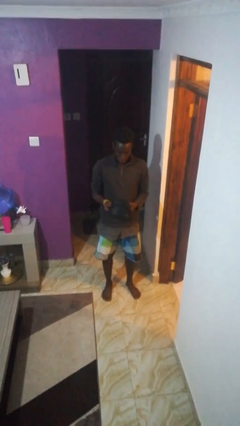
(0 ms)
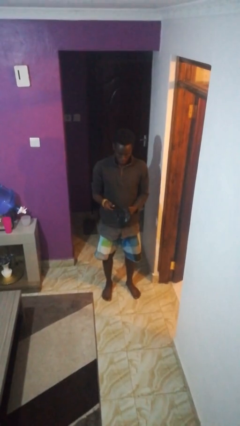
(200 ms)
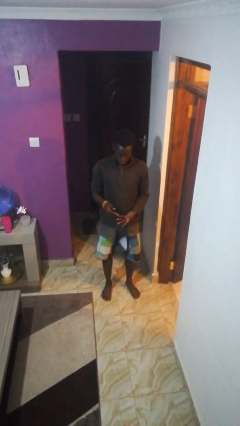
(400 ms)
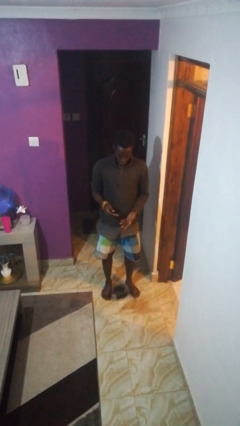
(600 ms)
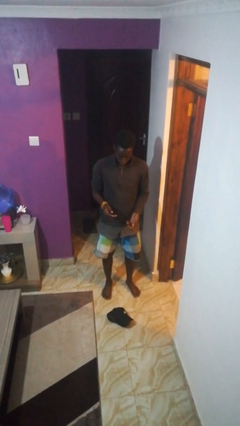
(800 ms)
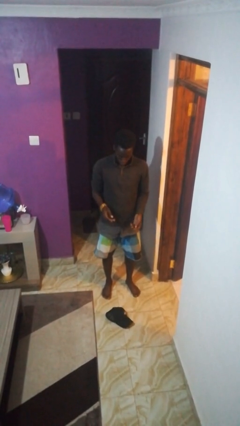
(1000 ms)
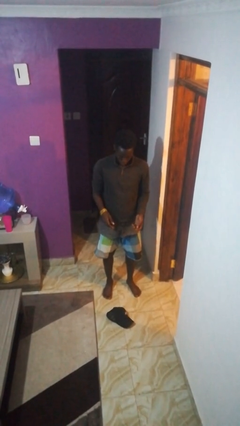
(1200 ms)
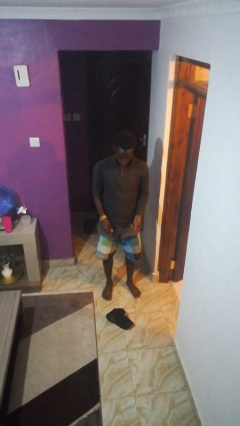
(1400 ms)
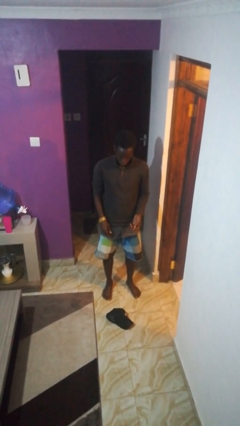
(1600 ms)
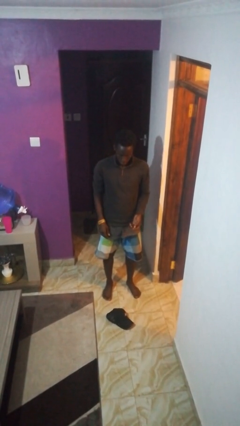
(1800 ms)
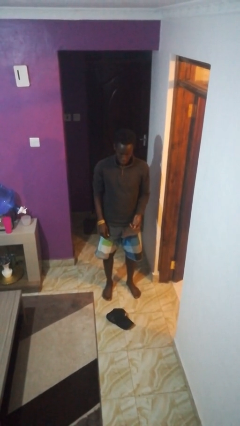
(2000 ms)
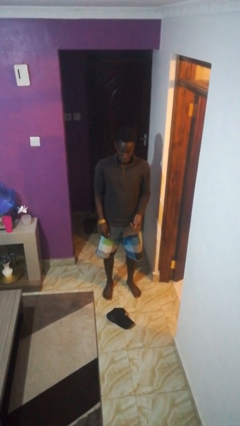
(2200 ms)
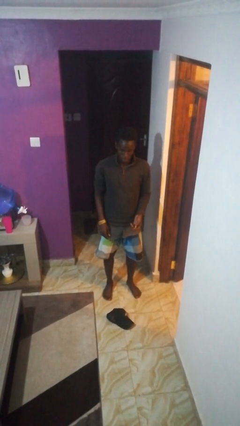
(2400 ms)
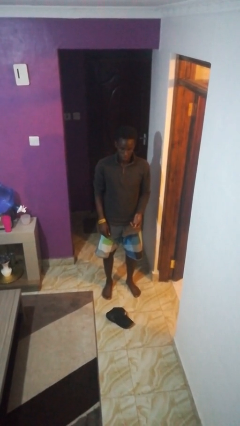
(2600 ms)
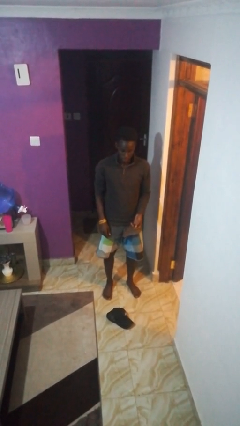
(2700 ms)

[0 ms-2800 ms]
person drops object

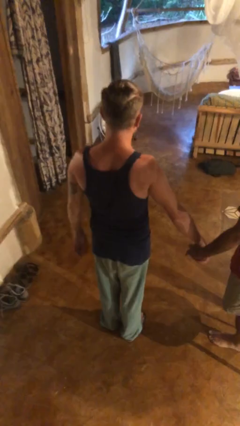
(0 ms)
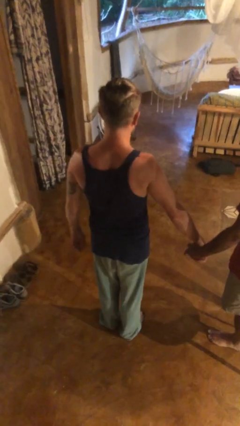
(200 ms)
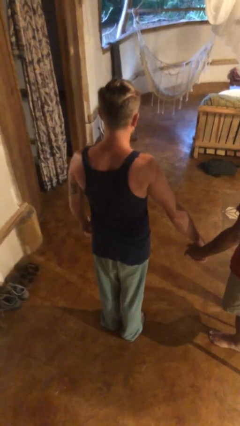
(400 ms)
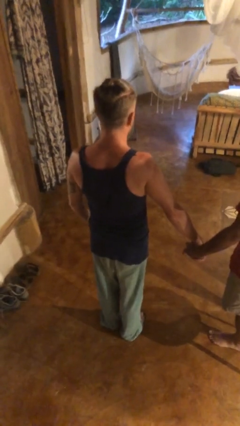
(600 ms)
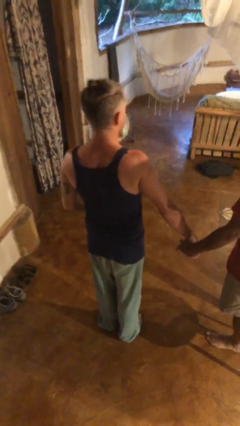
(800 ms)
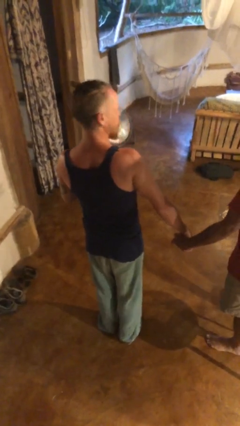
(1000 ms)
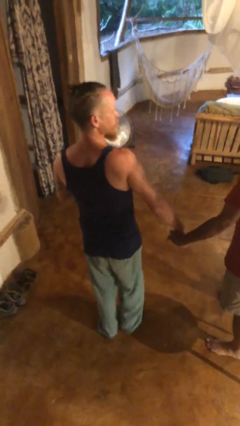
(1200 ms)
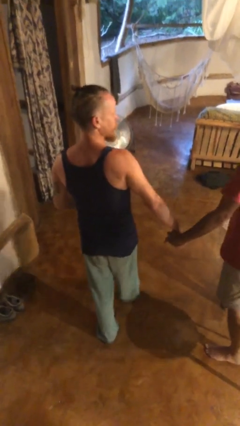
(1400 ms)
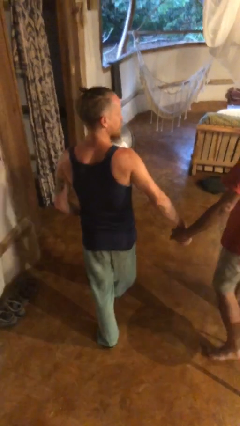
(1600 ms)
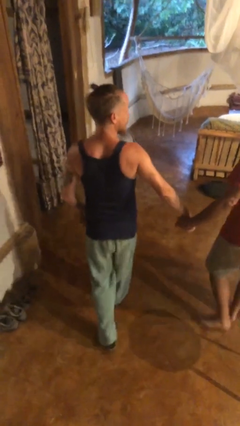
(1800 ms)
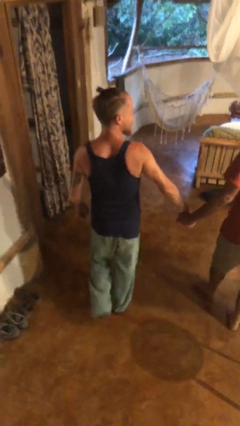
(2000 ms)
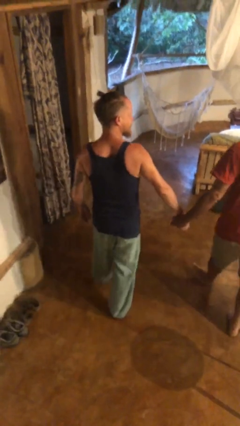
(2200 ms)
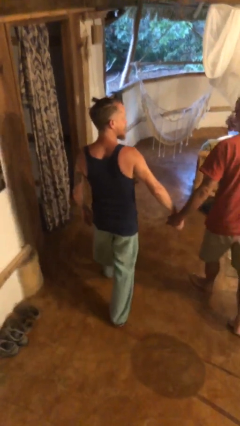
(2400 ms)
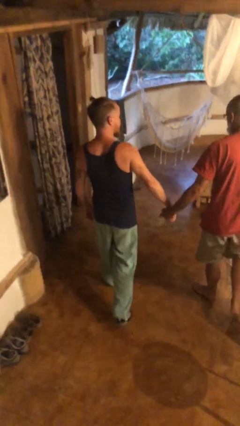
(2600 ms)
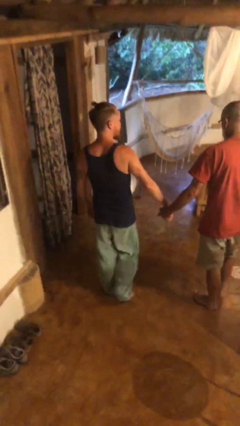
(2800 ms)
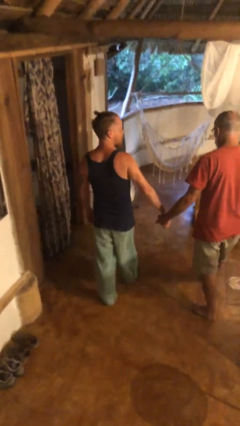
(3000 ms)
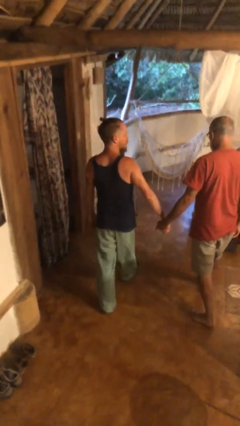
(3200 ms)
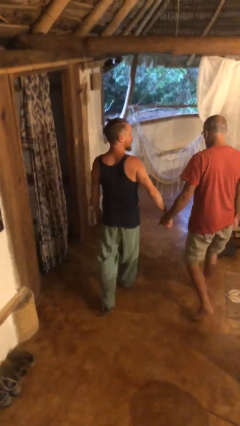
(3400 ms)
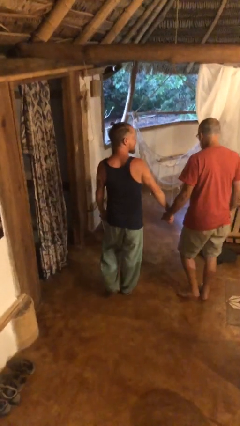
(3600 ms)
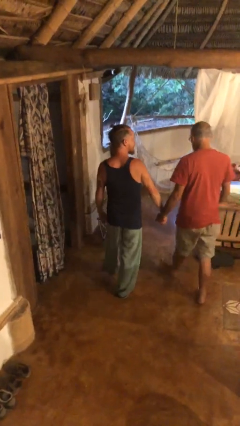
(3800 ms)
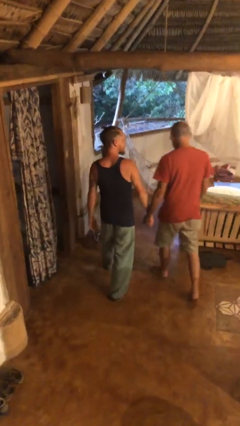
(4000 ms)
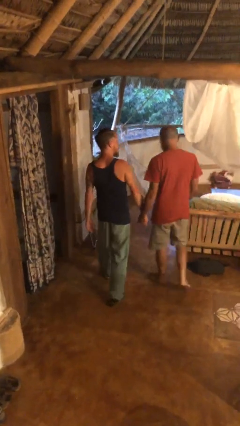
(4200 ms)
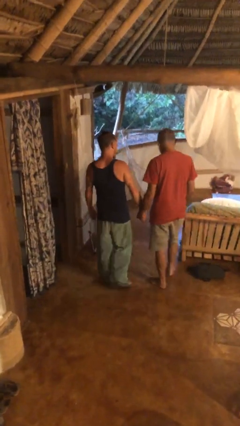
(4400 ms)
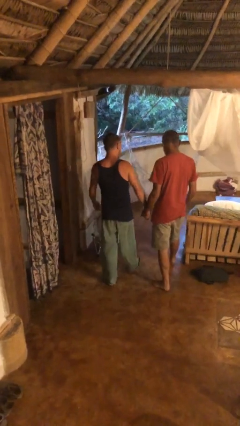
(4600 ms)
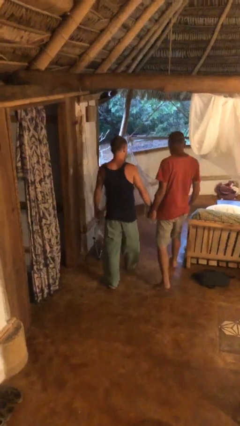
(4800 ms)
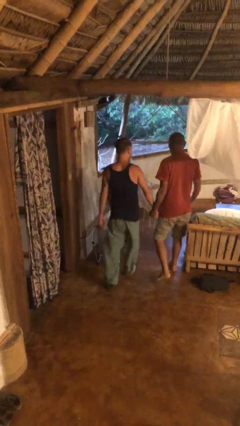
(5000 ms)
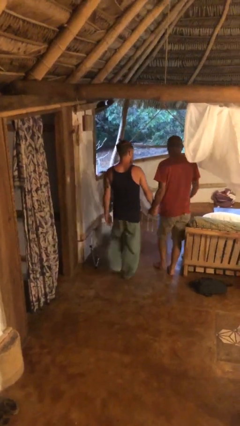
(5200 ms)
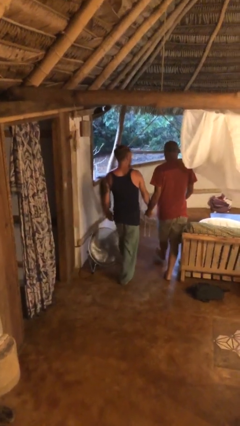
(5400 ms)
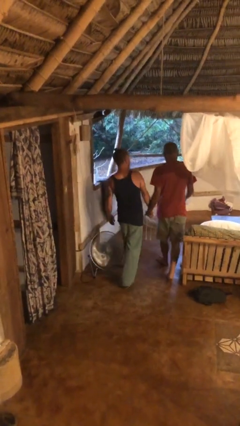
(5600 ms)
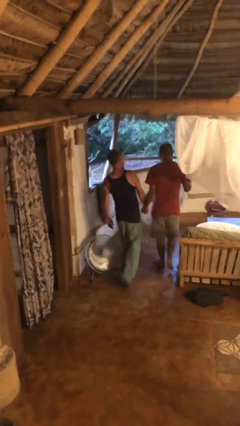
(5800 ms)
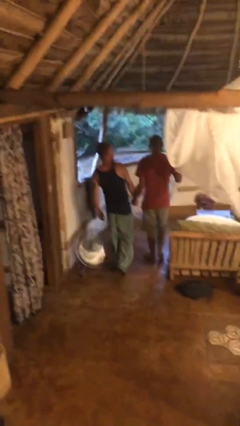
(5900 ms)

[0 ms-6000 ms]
person holds hand

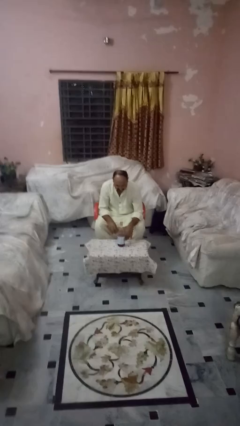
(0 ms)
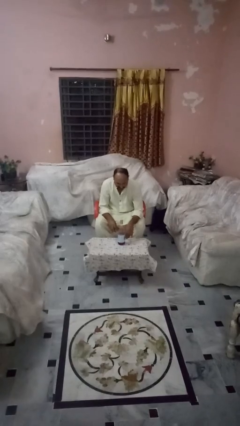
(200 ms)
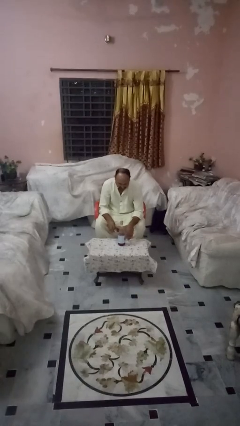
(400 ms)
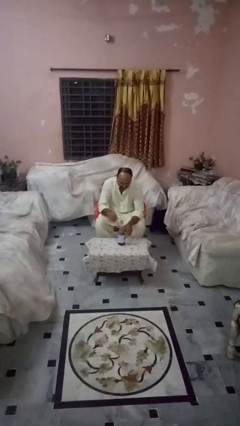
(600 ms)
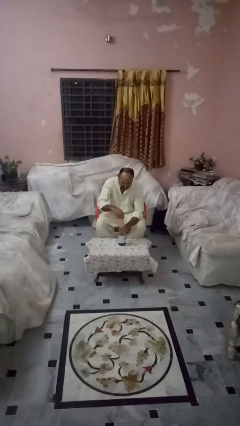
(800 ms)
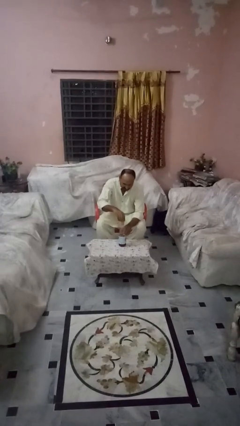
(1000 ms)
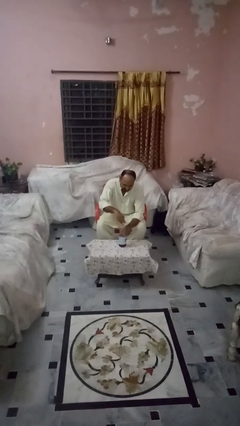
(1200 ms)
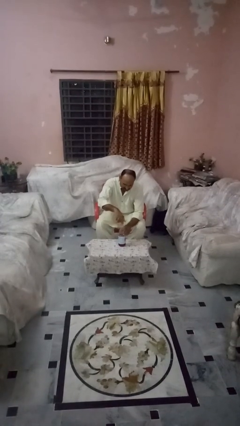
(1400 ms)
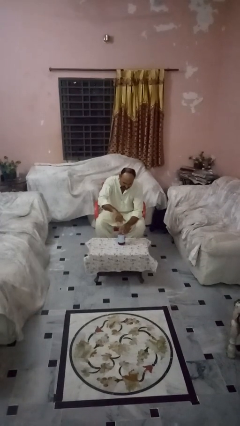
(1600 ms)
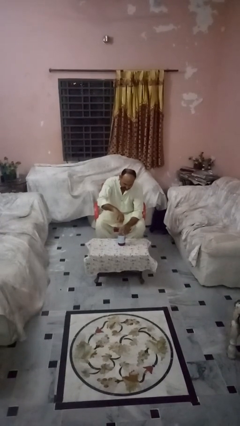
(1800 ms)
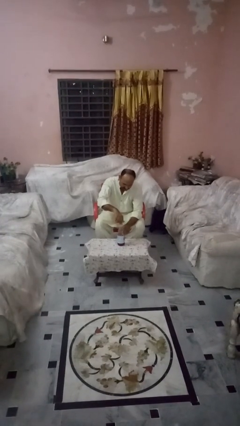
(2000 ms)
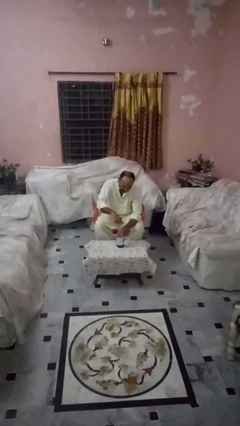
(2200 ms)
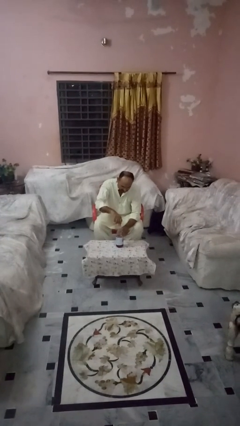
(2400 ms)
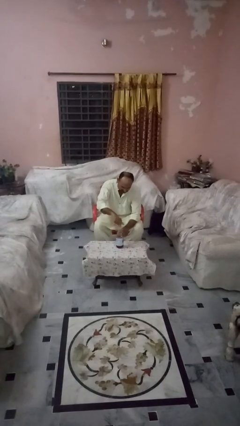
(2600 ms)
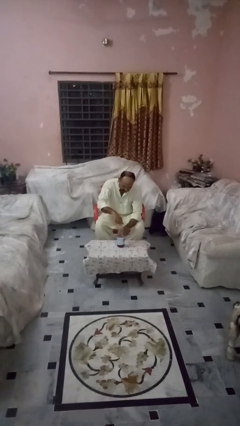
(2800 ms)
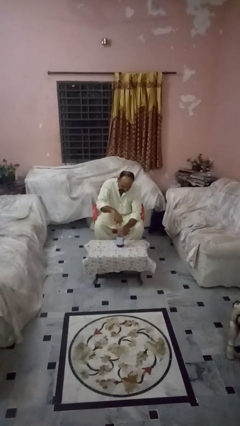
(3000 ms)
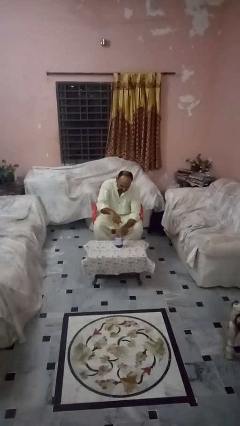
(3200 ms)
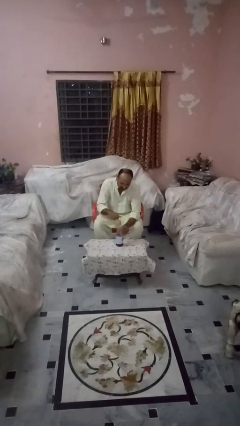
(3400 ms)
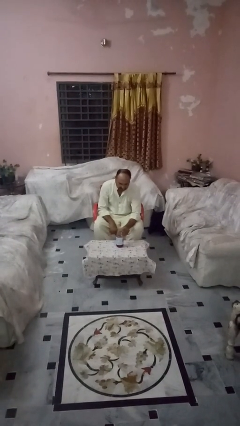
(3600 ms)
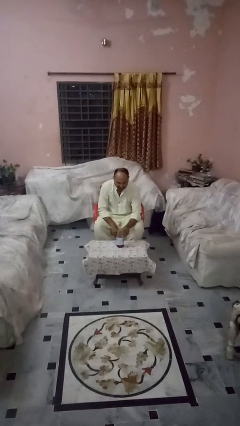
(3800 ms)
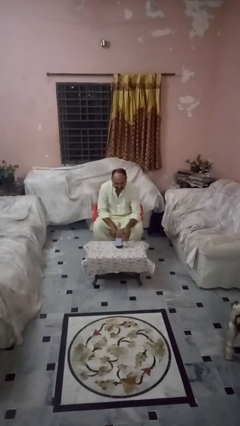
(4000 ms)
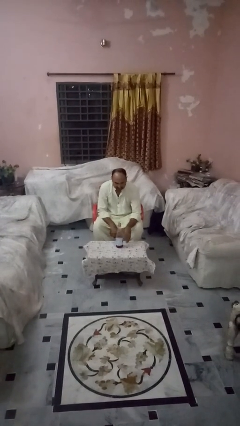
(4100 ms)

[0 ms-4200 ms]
person screws lid to bottle

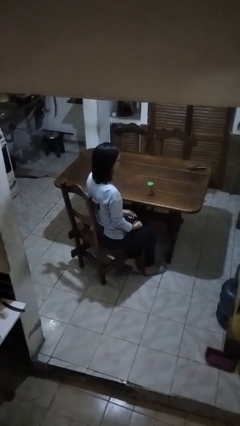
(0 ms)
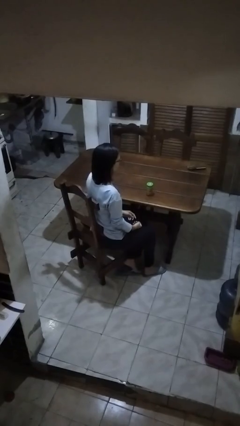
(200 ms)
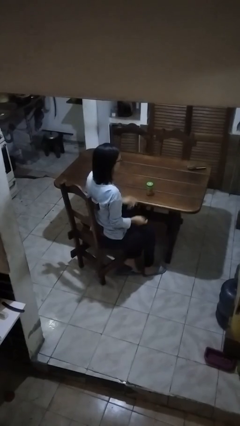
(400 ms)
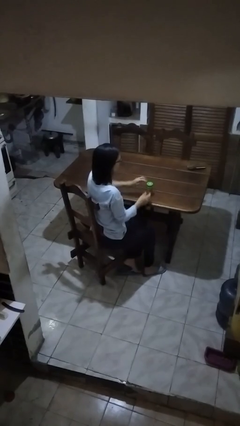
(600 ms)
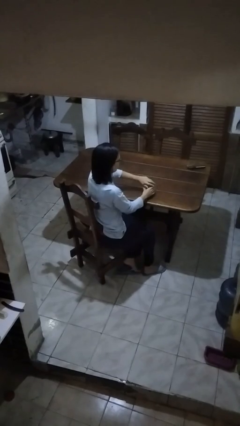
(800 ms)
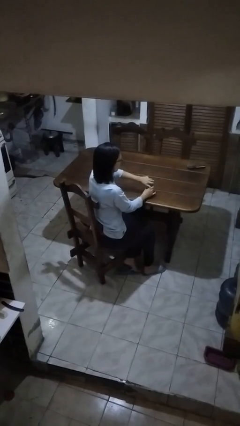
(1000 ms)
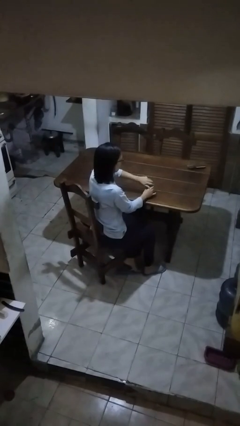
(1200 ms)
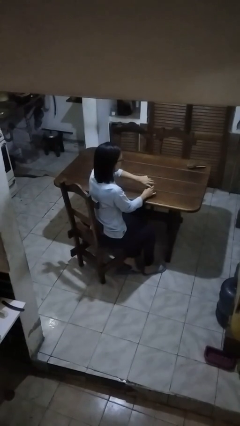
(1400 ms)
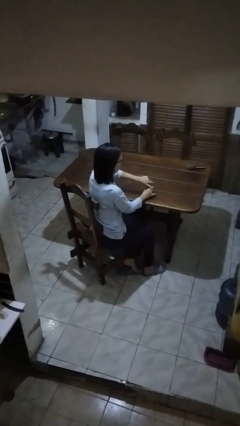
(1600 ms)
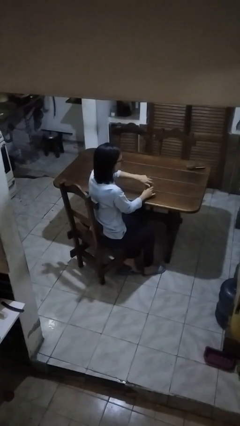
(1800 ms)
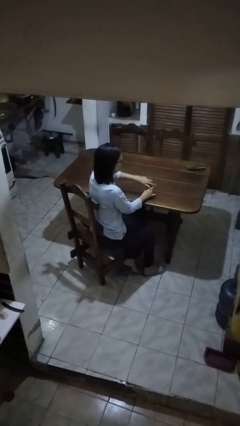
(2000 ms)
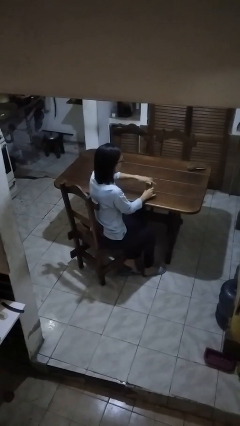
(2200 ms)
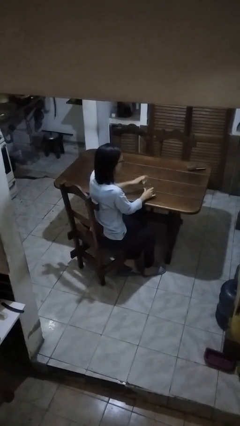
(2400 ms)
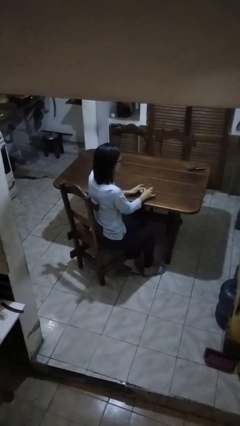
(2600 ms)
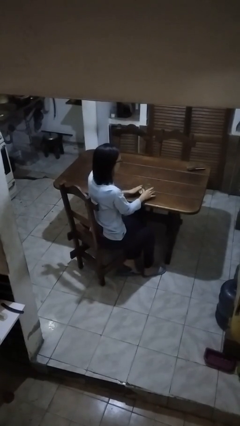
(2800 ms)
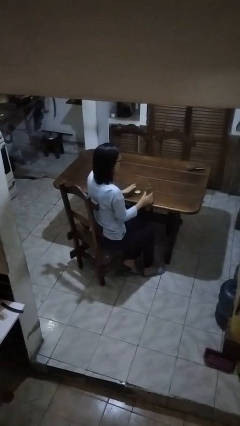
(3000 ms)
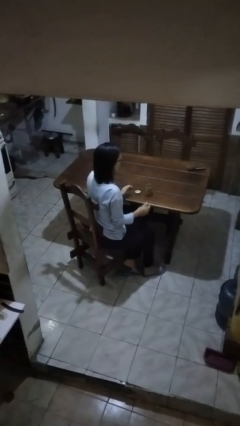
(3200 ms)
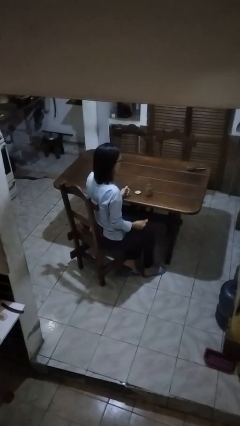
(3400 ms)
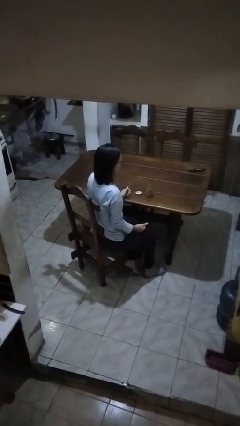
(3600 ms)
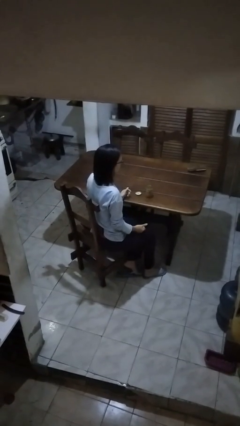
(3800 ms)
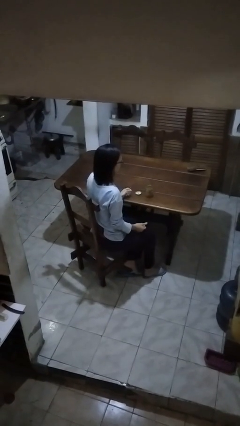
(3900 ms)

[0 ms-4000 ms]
person opens jar

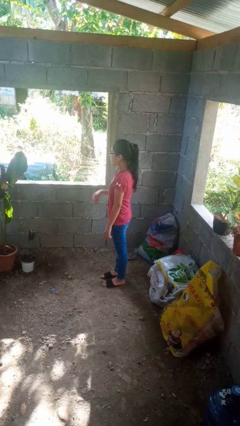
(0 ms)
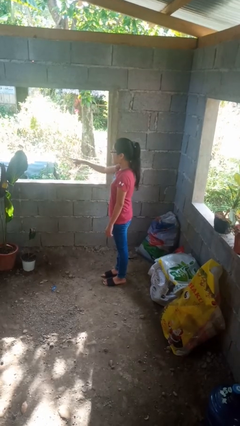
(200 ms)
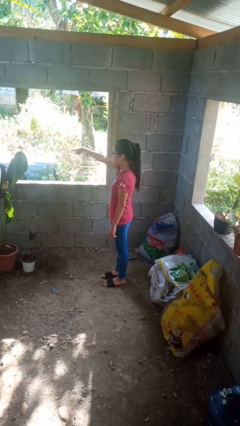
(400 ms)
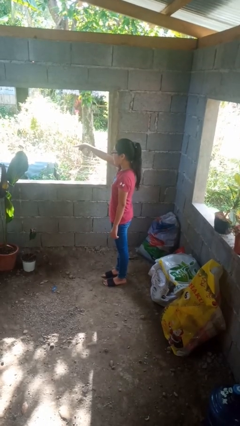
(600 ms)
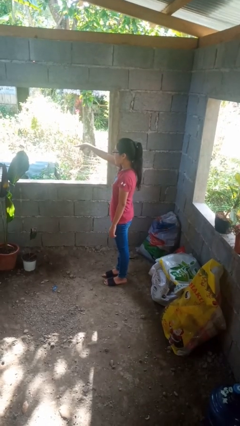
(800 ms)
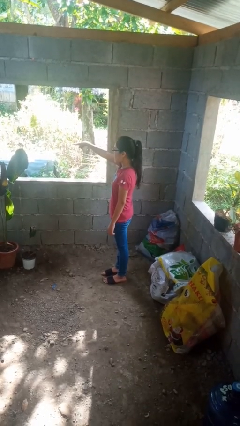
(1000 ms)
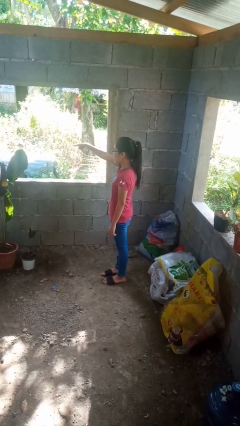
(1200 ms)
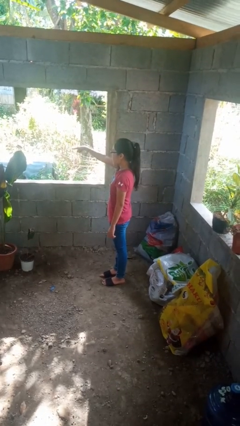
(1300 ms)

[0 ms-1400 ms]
person points at person
